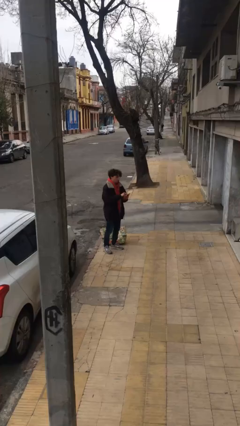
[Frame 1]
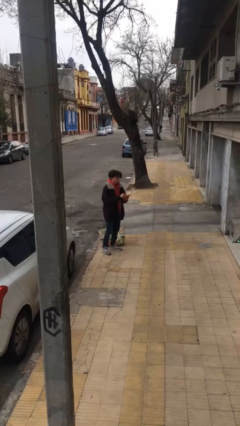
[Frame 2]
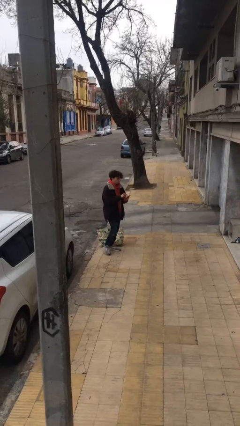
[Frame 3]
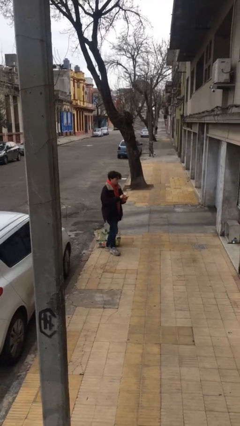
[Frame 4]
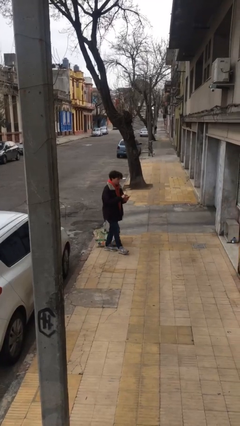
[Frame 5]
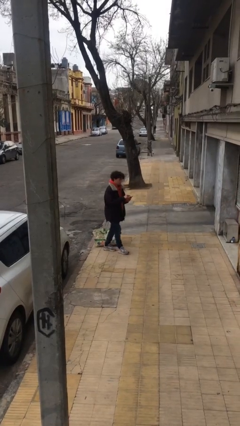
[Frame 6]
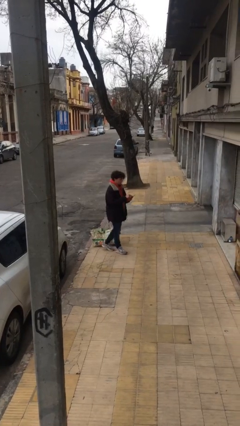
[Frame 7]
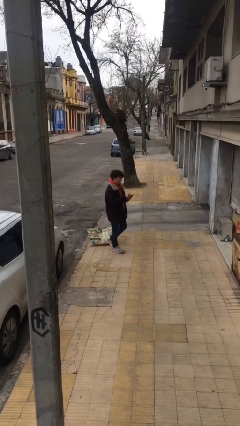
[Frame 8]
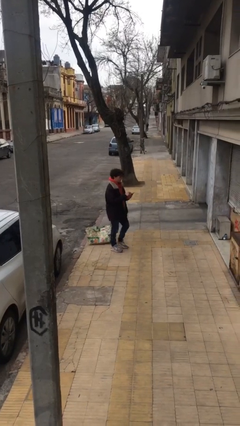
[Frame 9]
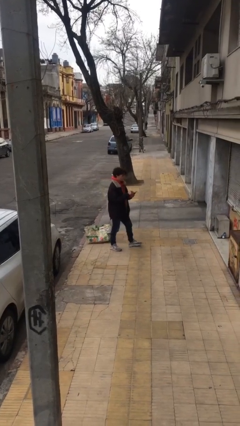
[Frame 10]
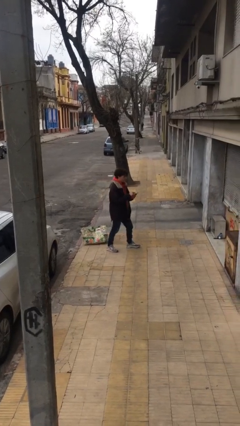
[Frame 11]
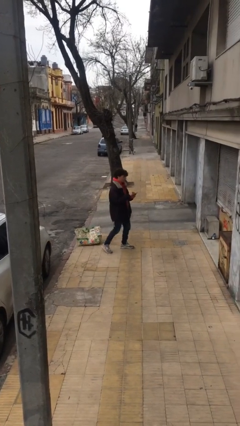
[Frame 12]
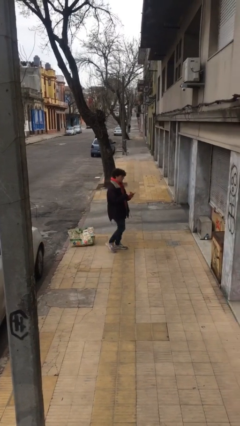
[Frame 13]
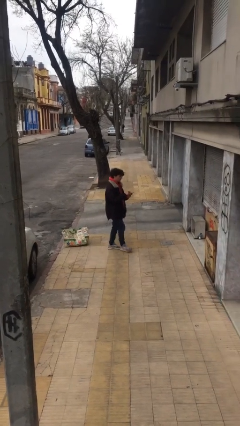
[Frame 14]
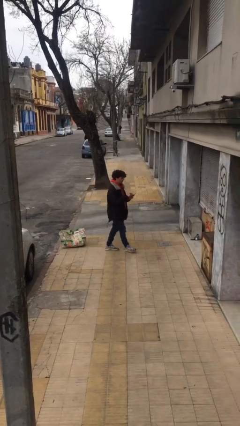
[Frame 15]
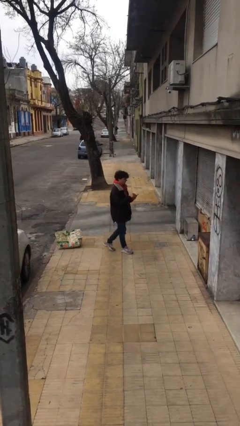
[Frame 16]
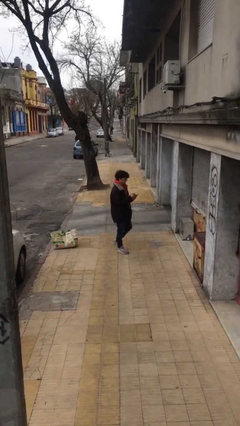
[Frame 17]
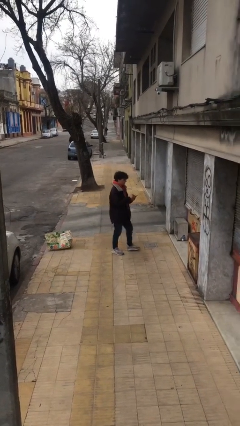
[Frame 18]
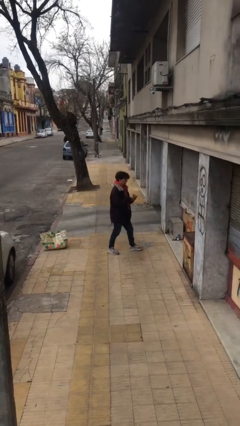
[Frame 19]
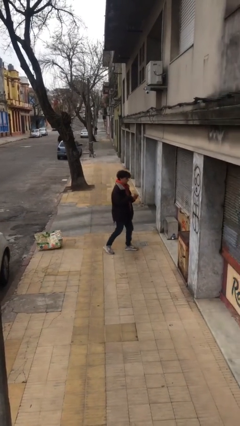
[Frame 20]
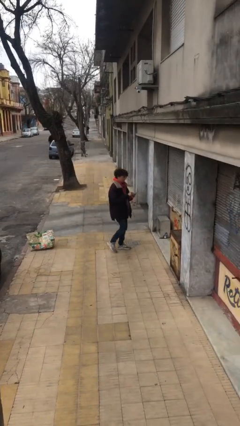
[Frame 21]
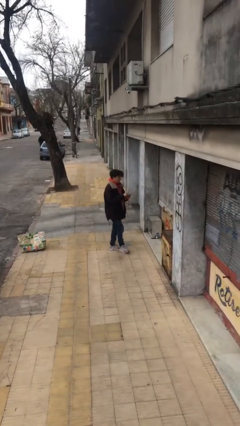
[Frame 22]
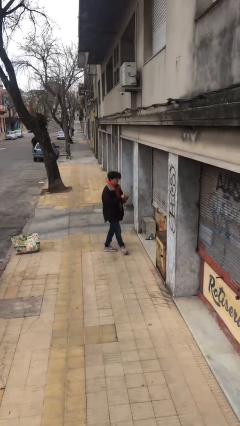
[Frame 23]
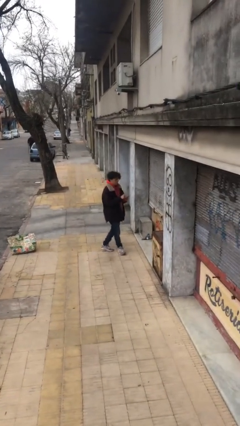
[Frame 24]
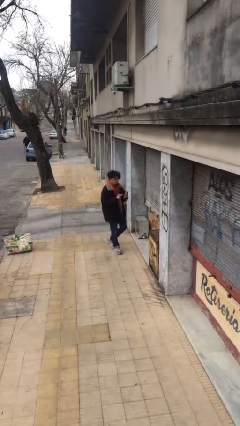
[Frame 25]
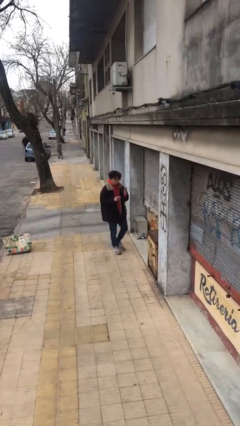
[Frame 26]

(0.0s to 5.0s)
person texts on phone

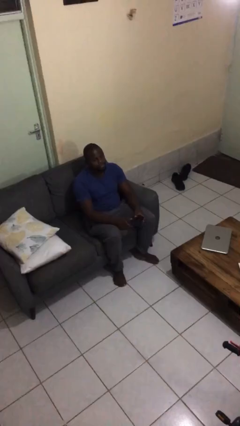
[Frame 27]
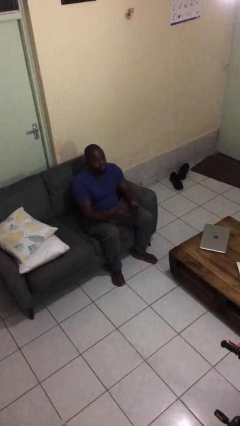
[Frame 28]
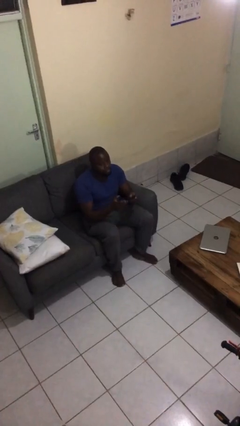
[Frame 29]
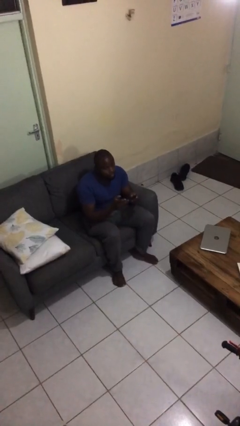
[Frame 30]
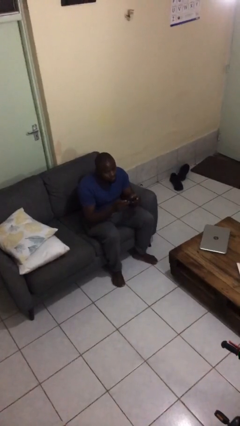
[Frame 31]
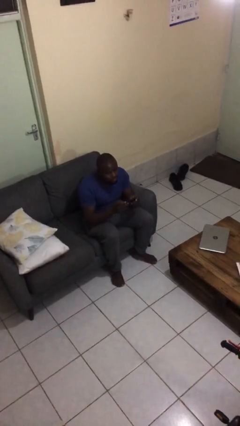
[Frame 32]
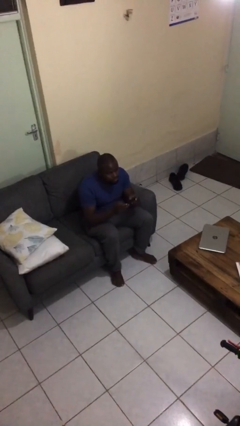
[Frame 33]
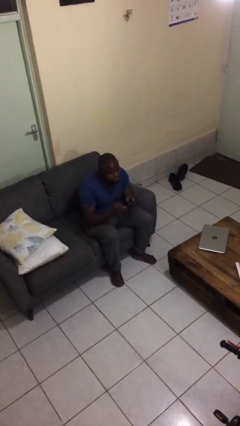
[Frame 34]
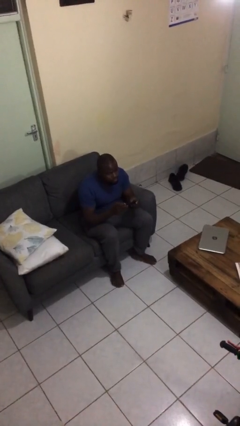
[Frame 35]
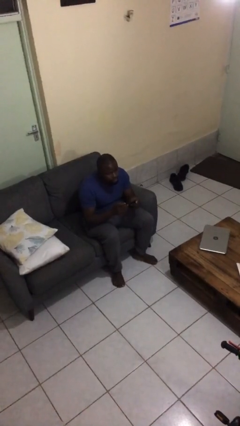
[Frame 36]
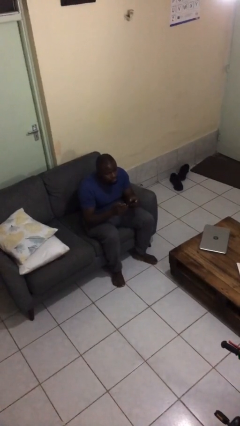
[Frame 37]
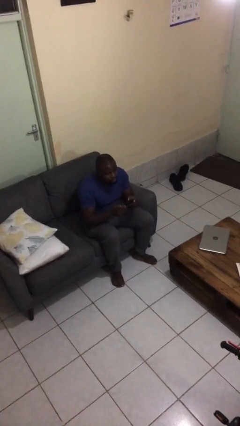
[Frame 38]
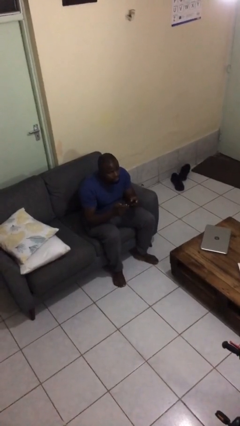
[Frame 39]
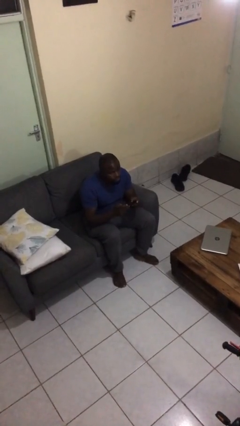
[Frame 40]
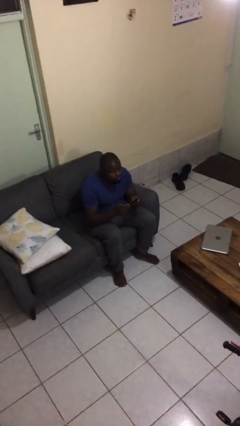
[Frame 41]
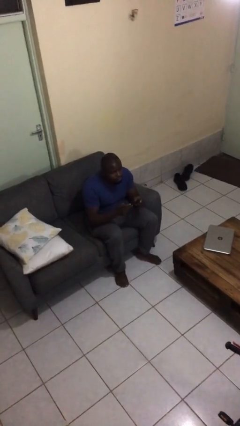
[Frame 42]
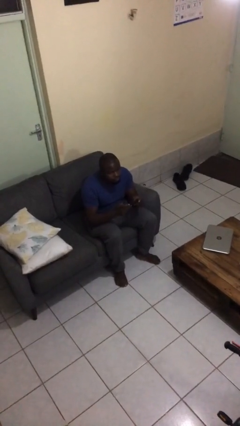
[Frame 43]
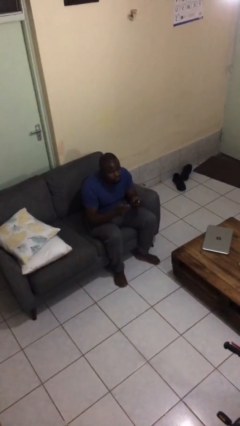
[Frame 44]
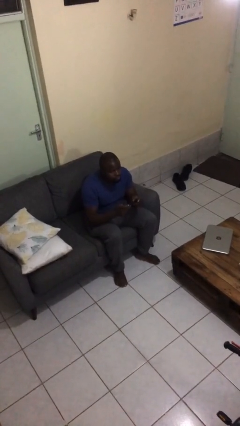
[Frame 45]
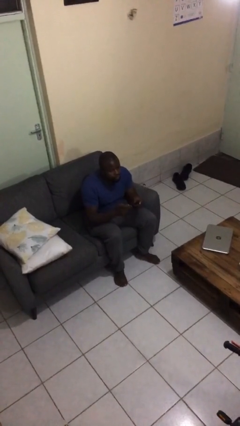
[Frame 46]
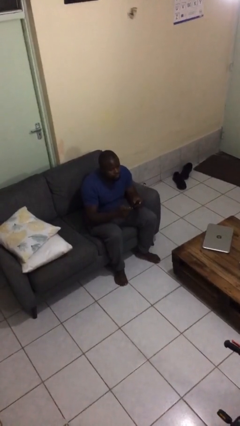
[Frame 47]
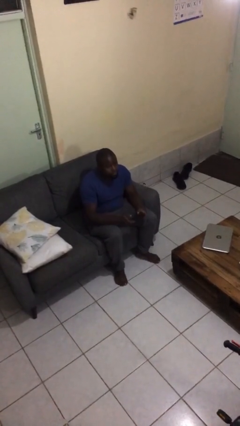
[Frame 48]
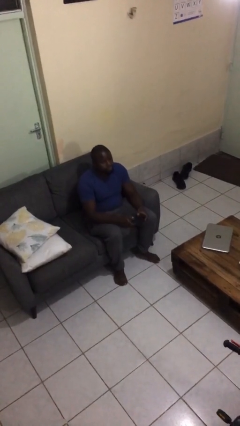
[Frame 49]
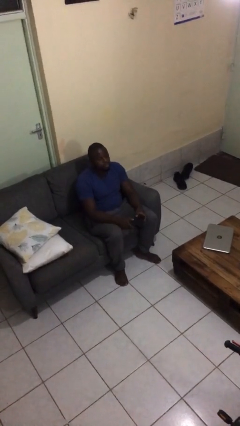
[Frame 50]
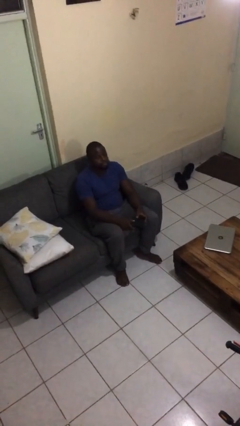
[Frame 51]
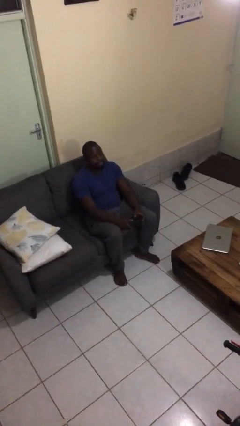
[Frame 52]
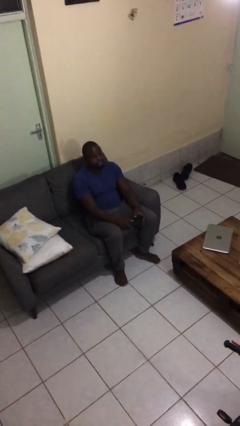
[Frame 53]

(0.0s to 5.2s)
person interacts with handheld game

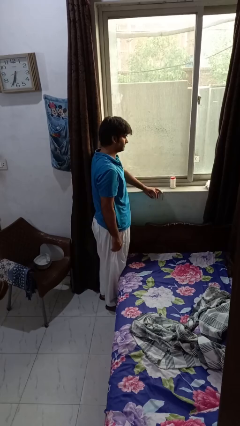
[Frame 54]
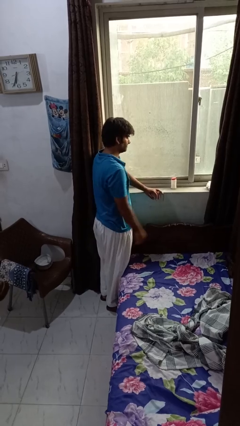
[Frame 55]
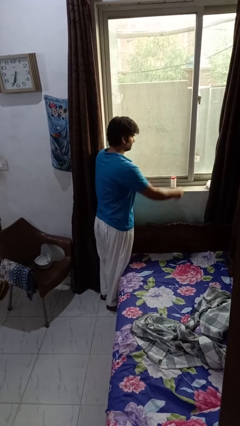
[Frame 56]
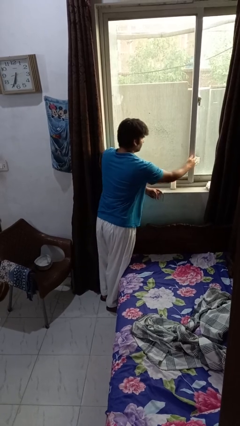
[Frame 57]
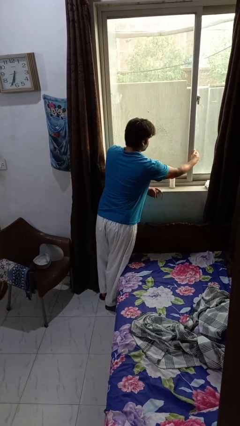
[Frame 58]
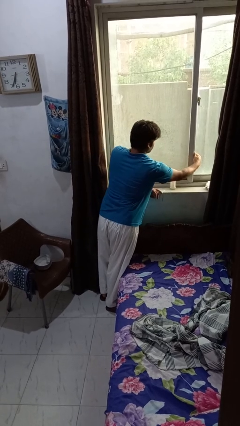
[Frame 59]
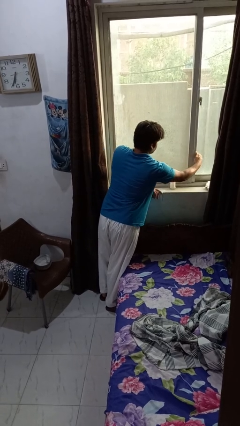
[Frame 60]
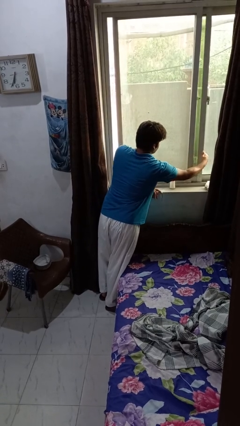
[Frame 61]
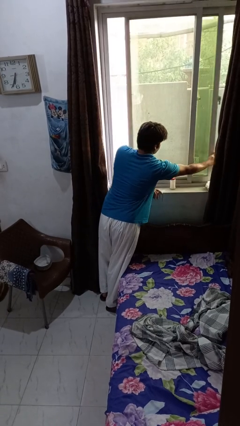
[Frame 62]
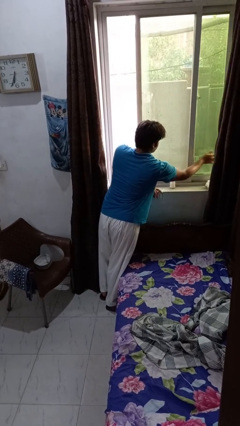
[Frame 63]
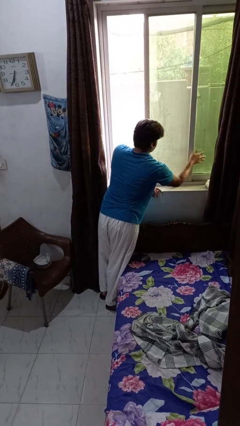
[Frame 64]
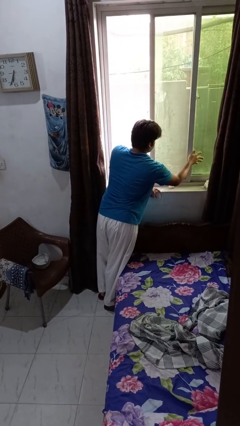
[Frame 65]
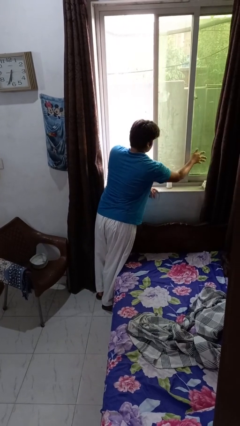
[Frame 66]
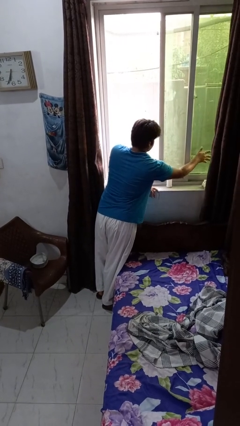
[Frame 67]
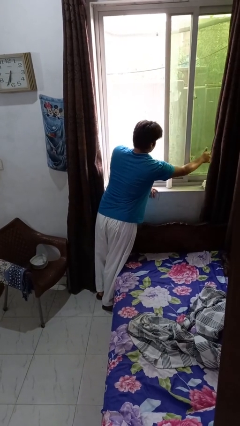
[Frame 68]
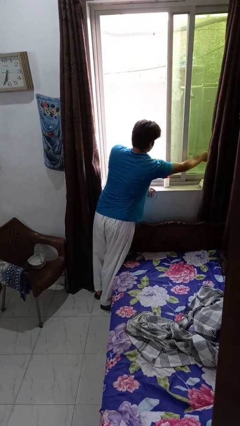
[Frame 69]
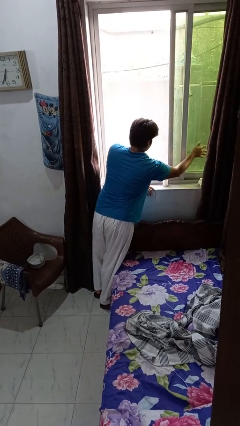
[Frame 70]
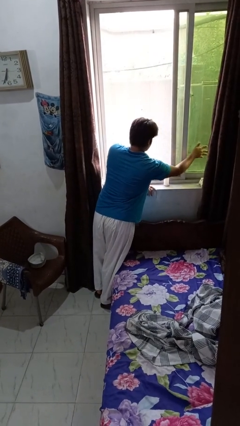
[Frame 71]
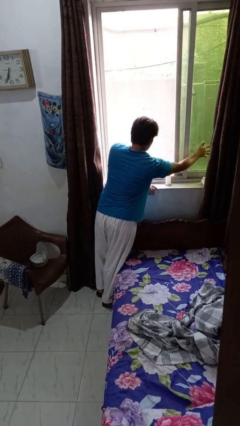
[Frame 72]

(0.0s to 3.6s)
person opens home window

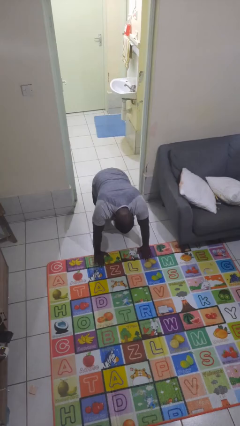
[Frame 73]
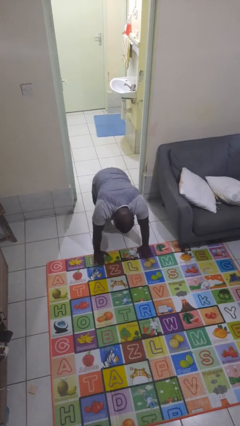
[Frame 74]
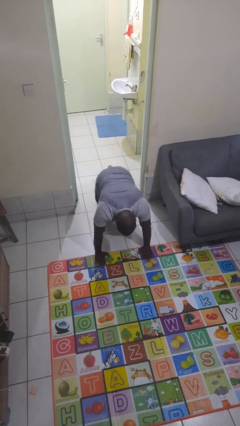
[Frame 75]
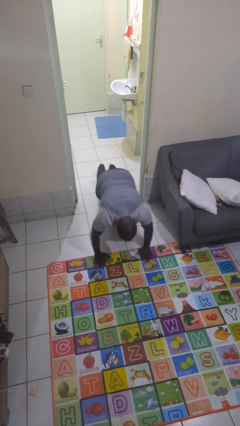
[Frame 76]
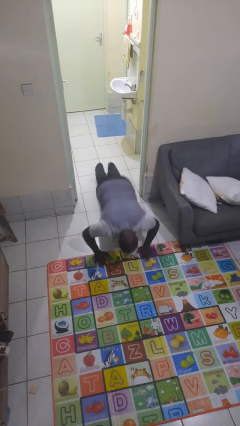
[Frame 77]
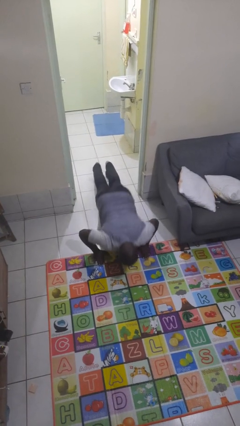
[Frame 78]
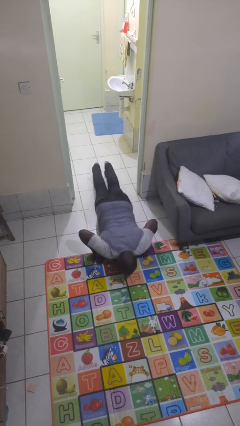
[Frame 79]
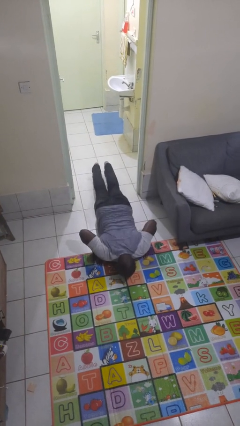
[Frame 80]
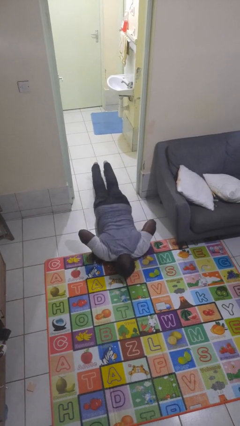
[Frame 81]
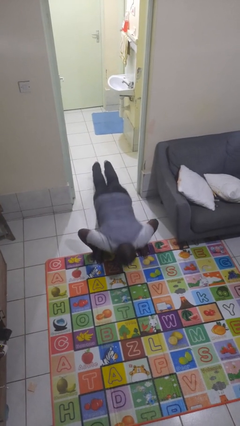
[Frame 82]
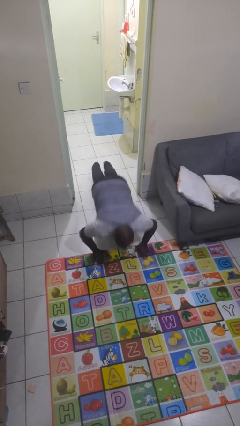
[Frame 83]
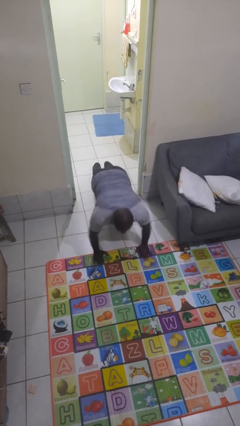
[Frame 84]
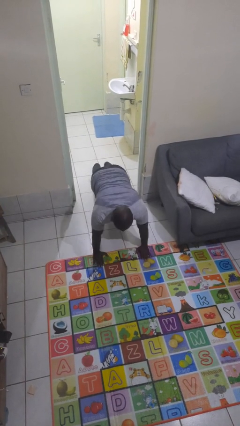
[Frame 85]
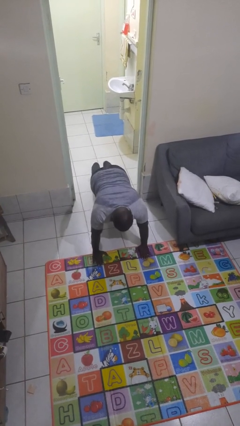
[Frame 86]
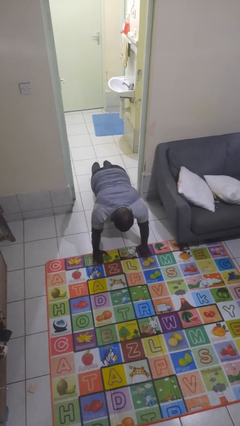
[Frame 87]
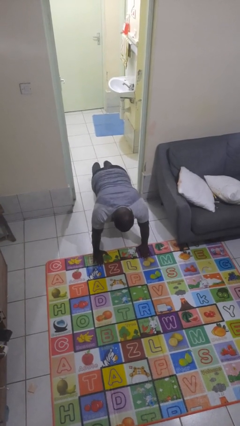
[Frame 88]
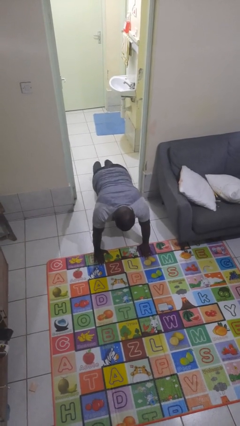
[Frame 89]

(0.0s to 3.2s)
person exercises with pushup

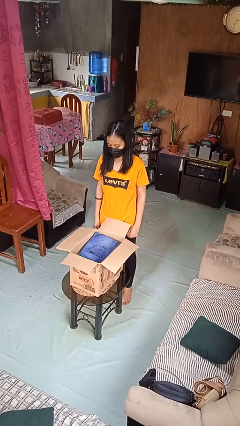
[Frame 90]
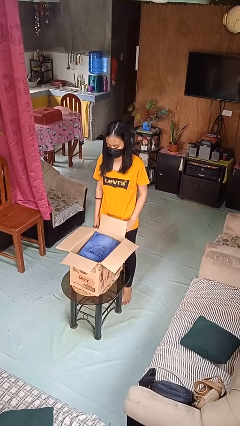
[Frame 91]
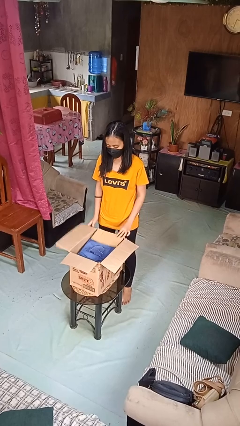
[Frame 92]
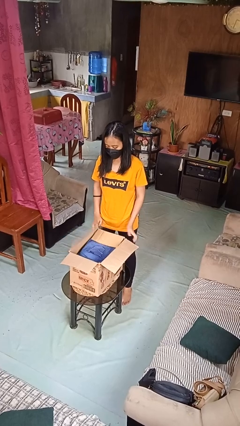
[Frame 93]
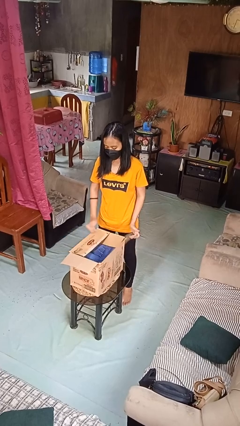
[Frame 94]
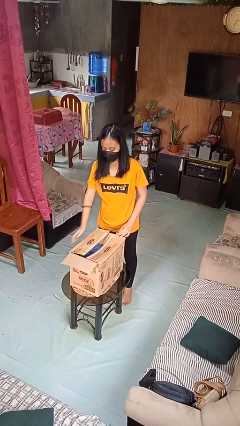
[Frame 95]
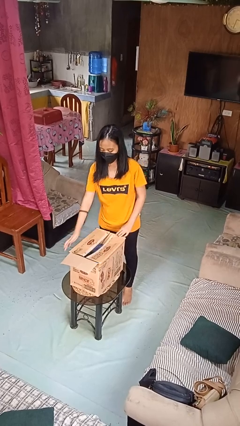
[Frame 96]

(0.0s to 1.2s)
person closes box
